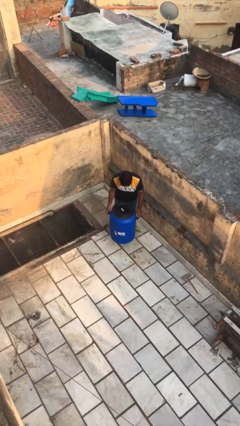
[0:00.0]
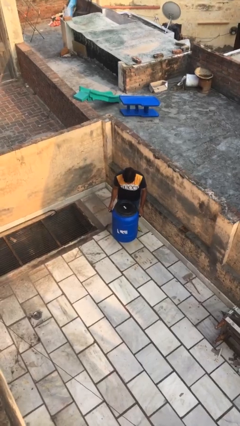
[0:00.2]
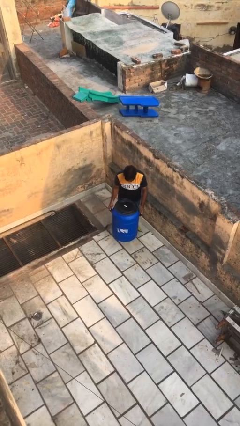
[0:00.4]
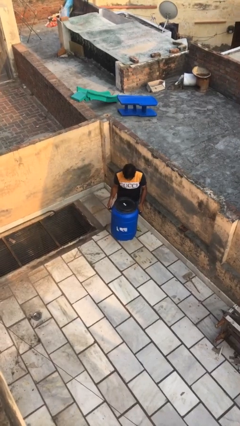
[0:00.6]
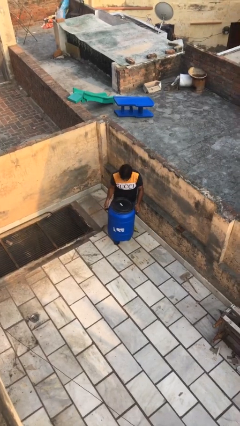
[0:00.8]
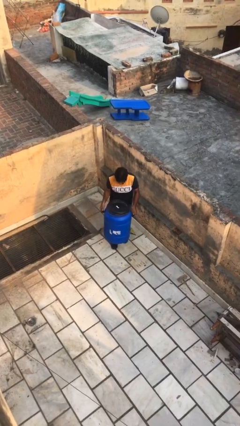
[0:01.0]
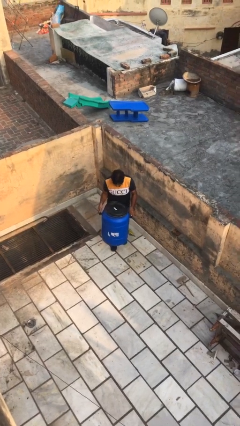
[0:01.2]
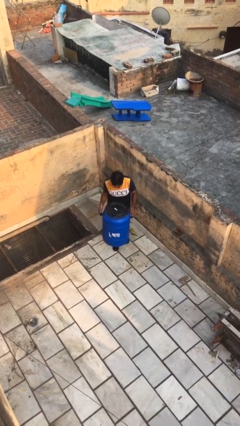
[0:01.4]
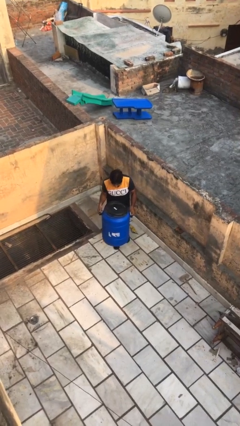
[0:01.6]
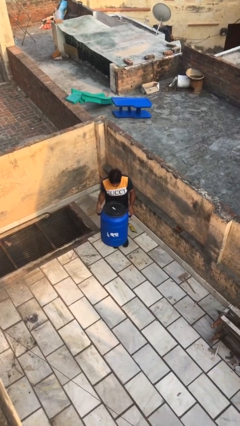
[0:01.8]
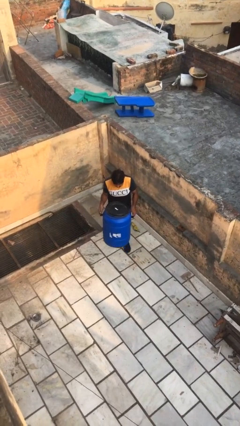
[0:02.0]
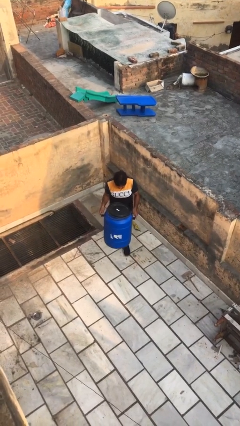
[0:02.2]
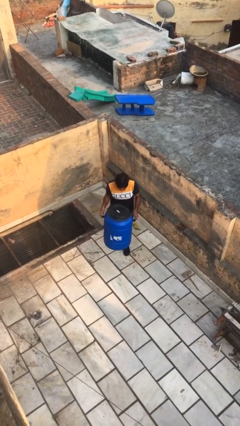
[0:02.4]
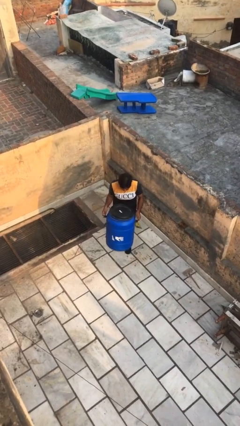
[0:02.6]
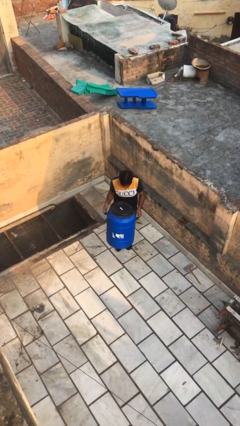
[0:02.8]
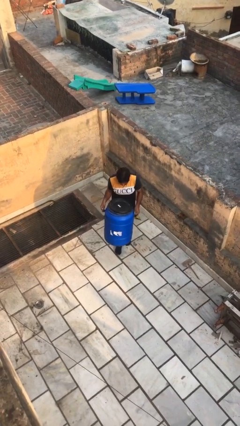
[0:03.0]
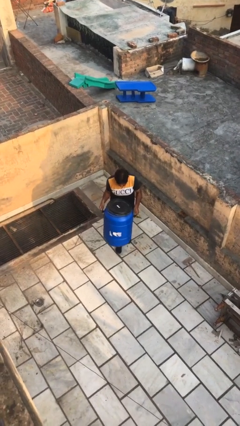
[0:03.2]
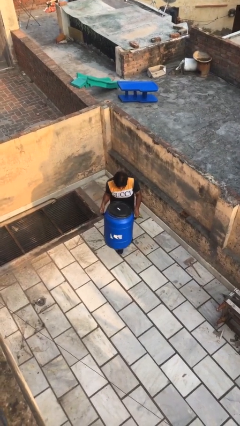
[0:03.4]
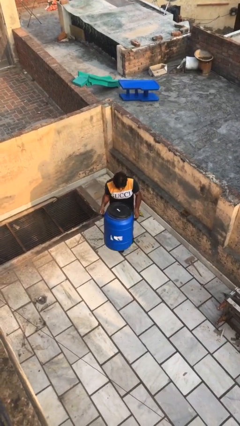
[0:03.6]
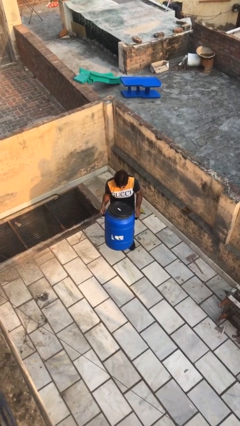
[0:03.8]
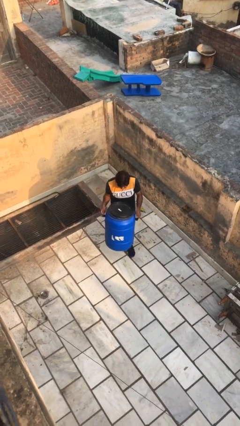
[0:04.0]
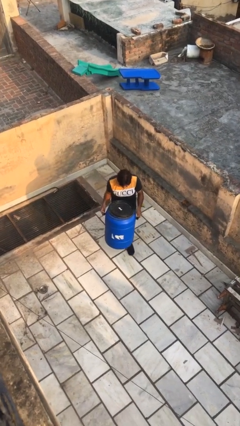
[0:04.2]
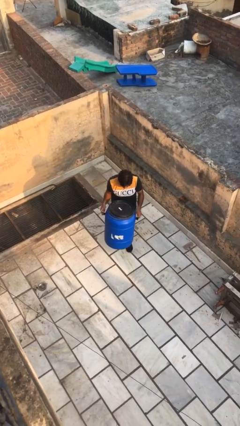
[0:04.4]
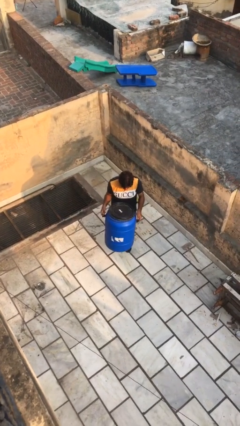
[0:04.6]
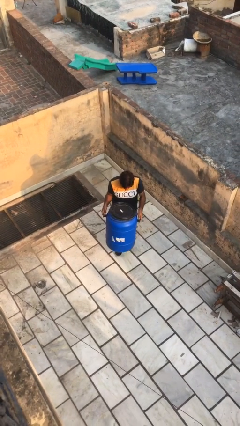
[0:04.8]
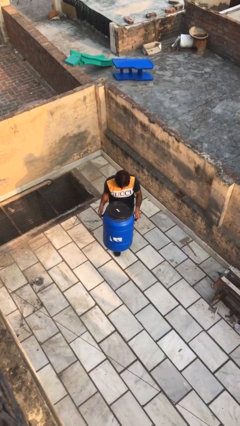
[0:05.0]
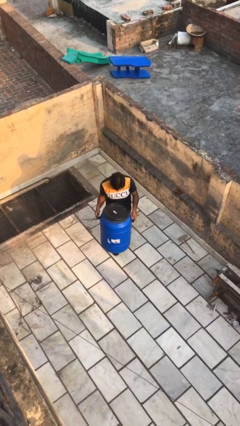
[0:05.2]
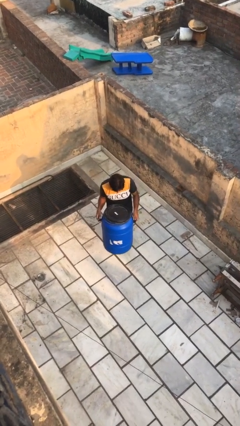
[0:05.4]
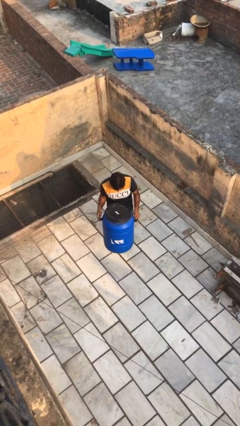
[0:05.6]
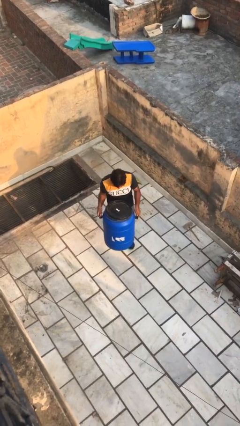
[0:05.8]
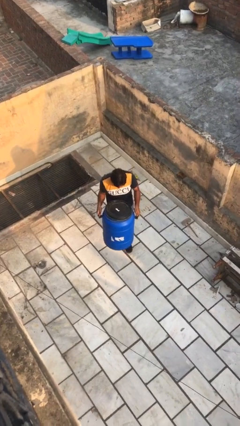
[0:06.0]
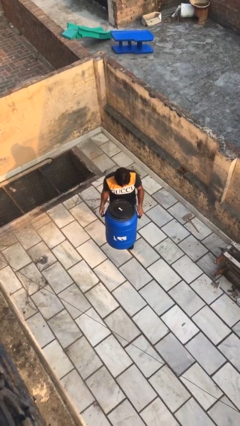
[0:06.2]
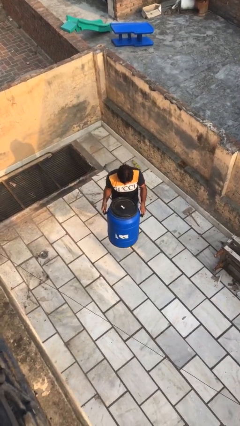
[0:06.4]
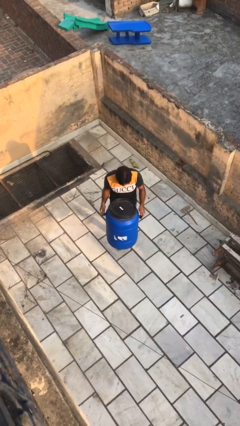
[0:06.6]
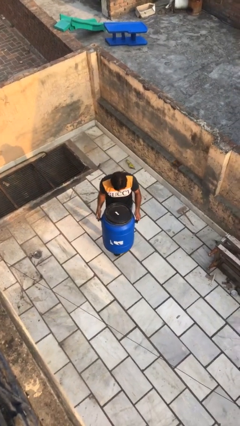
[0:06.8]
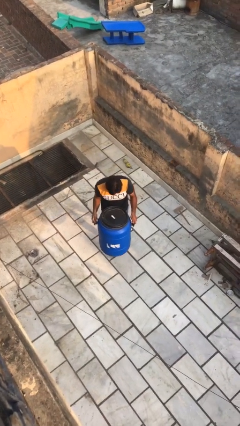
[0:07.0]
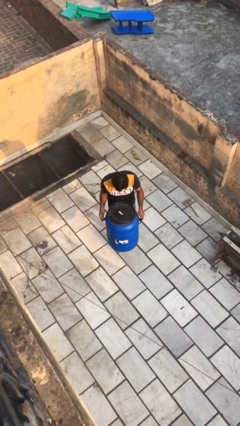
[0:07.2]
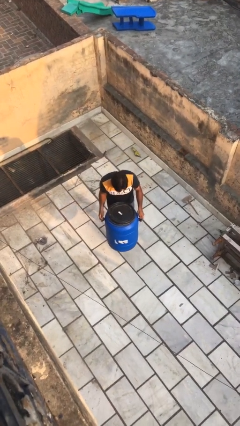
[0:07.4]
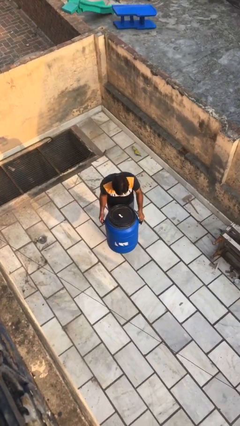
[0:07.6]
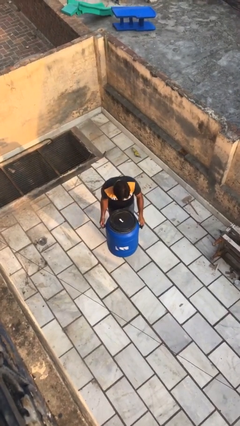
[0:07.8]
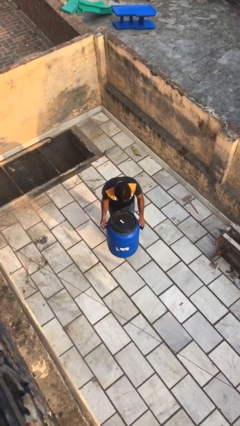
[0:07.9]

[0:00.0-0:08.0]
person carries heavy object

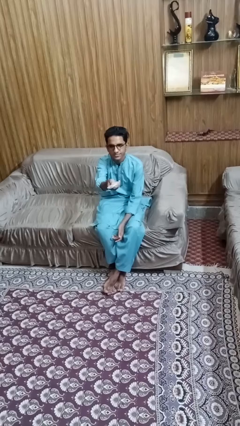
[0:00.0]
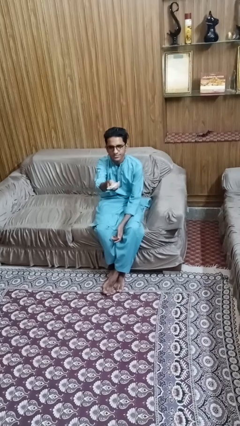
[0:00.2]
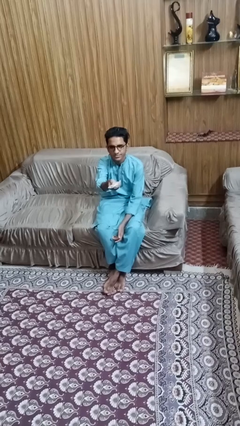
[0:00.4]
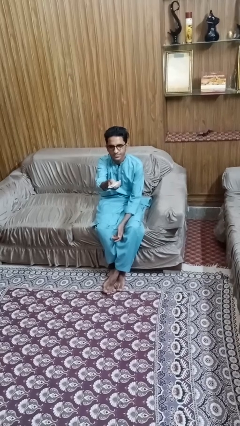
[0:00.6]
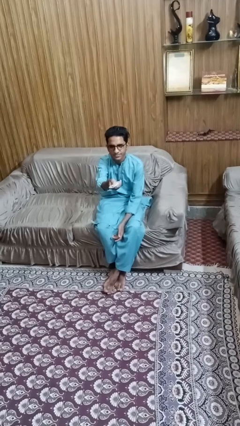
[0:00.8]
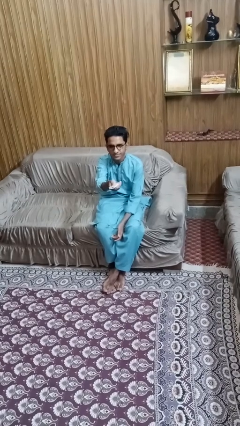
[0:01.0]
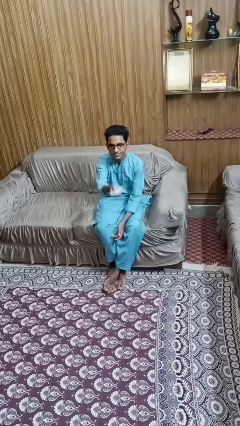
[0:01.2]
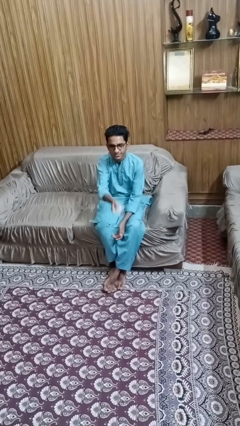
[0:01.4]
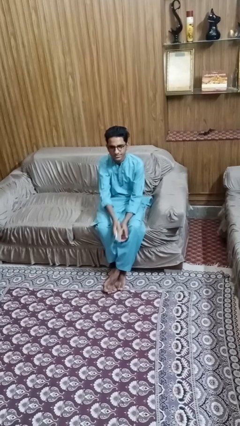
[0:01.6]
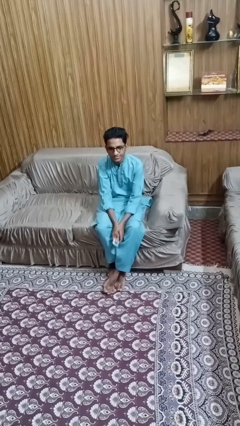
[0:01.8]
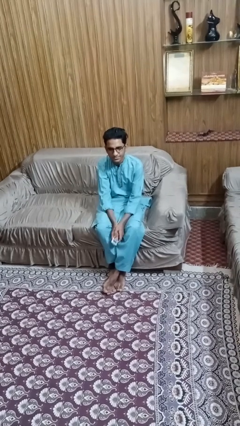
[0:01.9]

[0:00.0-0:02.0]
person uses television remote

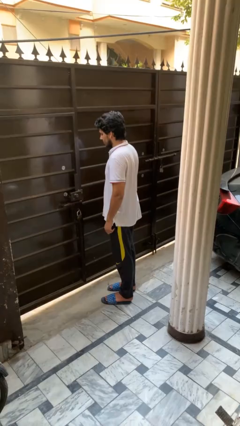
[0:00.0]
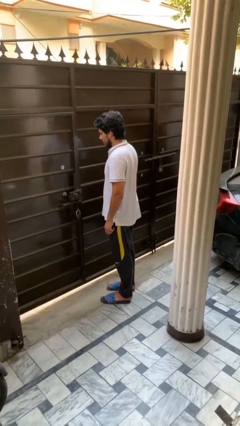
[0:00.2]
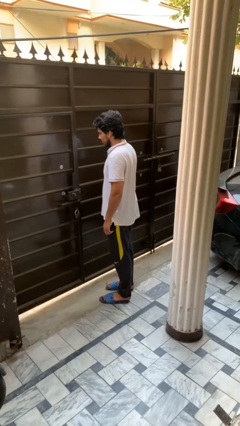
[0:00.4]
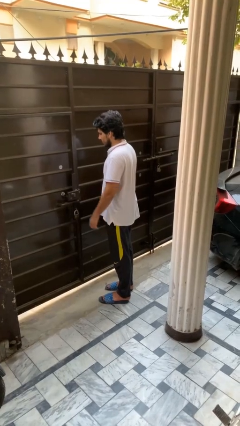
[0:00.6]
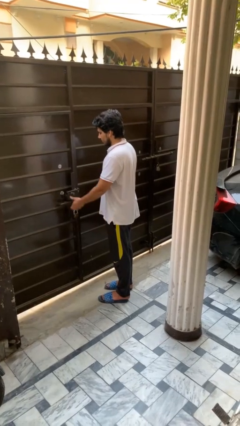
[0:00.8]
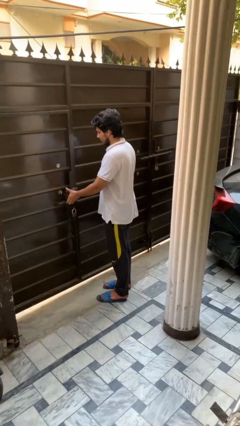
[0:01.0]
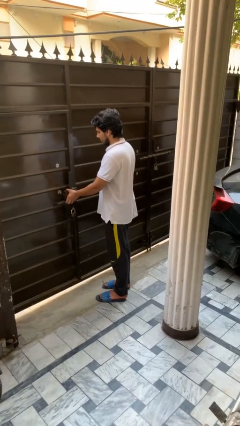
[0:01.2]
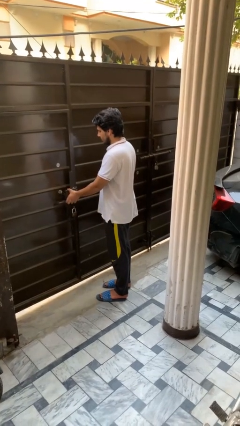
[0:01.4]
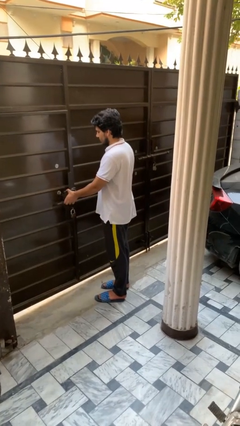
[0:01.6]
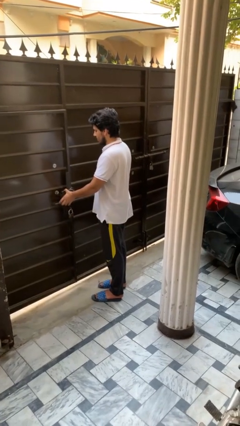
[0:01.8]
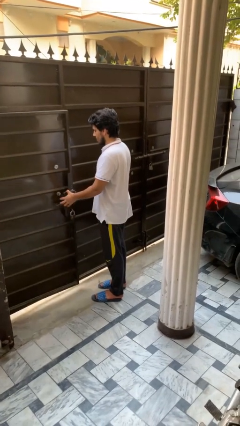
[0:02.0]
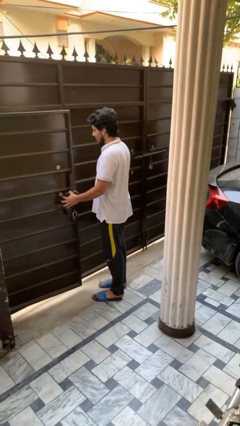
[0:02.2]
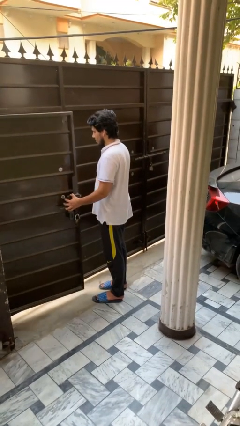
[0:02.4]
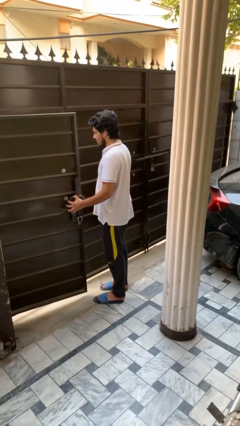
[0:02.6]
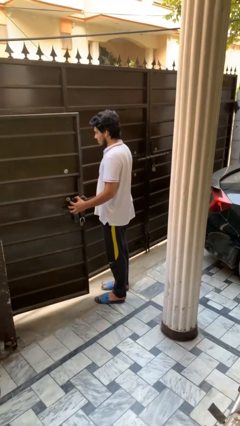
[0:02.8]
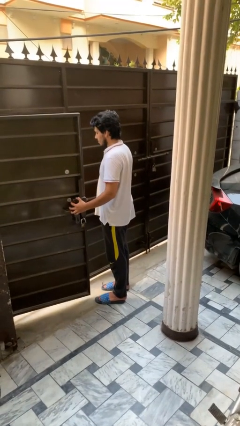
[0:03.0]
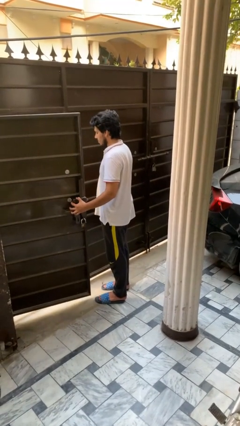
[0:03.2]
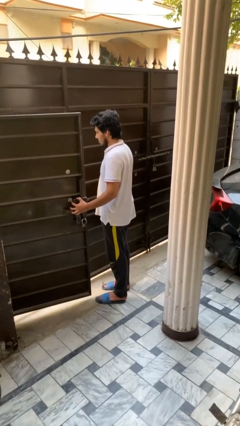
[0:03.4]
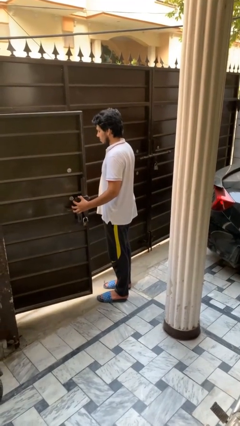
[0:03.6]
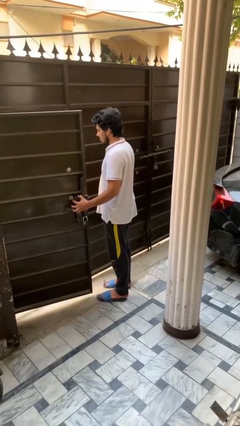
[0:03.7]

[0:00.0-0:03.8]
person opens gate

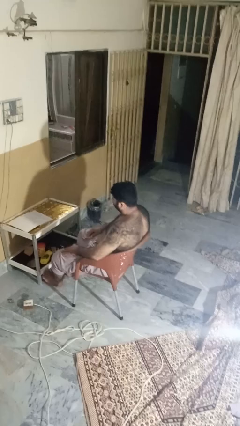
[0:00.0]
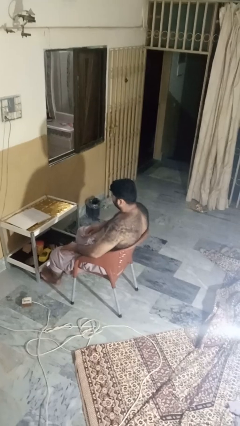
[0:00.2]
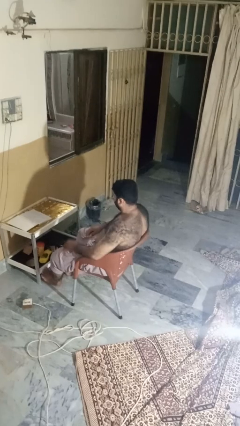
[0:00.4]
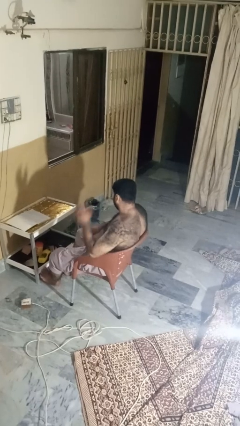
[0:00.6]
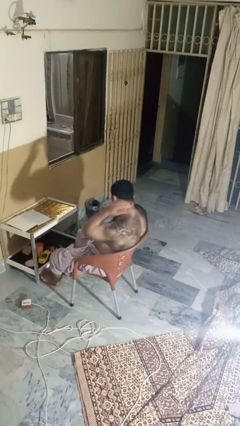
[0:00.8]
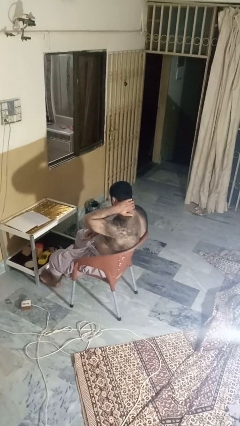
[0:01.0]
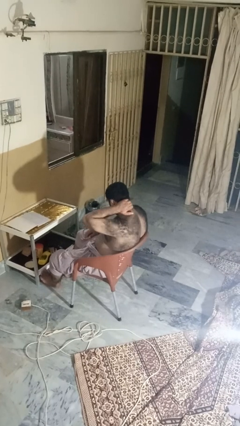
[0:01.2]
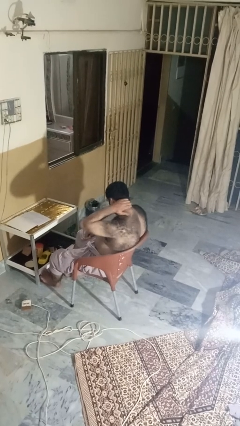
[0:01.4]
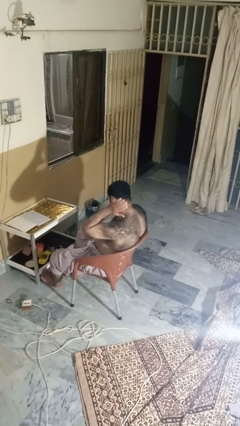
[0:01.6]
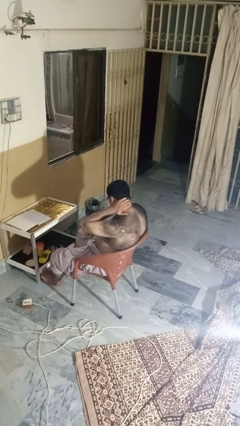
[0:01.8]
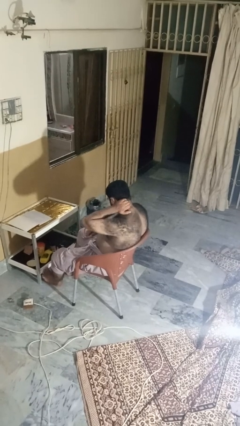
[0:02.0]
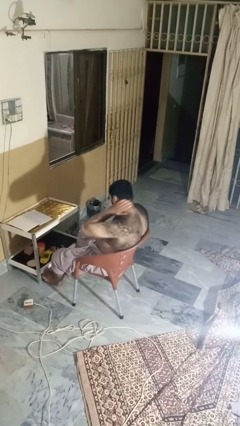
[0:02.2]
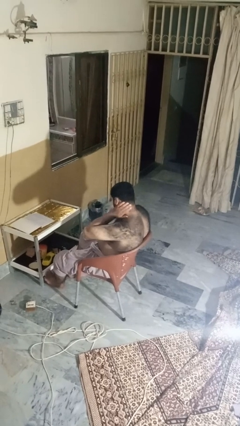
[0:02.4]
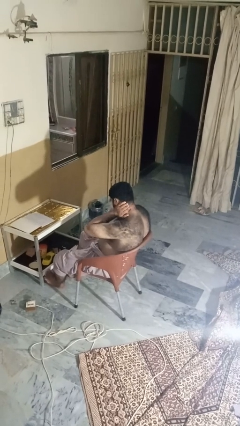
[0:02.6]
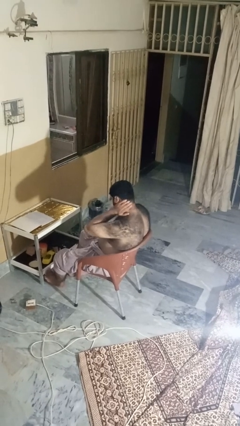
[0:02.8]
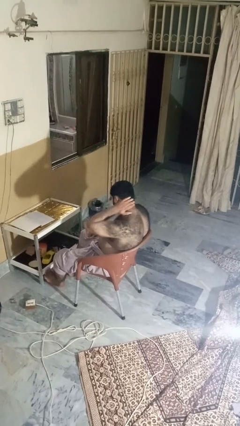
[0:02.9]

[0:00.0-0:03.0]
person rubs neck

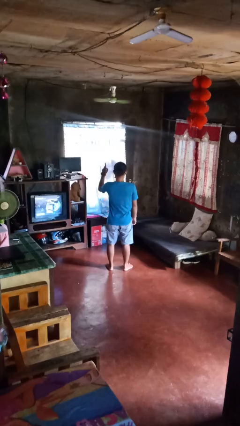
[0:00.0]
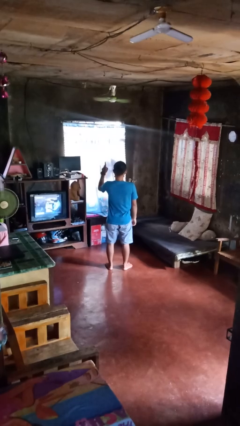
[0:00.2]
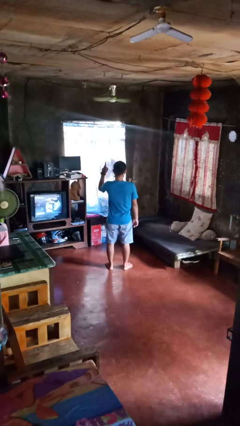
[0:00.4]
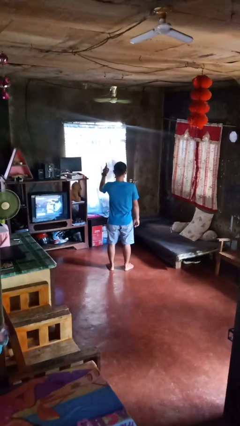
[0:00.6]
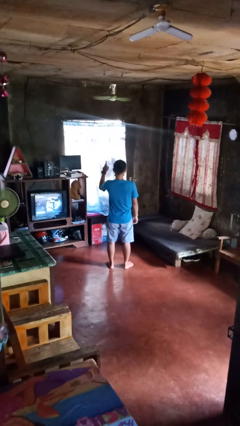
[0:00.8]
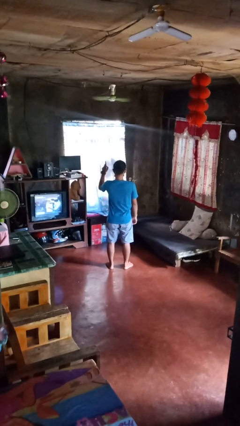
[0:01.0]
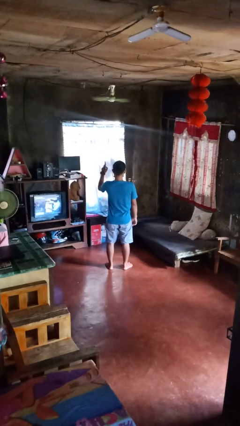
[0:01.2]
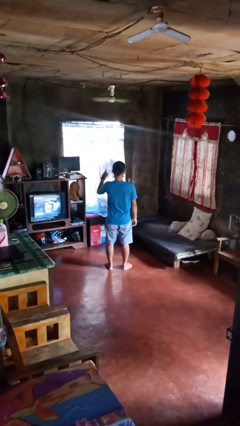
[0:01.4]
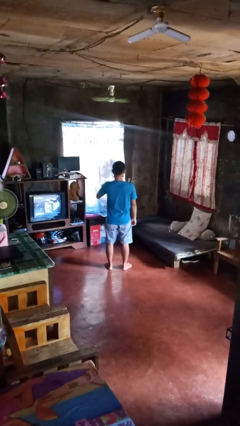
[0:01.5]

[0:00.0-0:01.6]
person gestures number one
